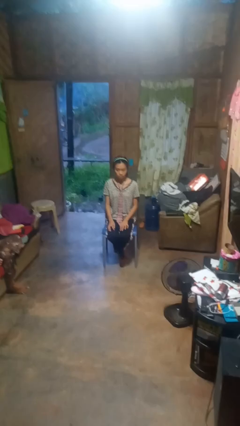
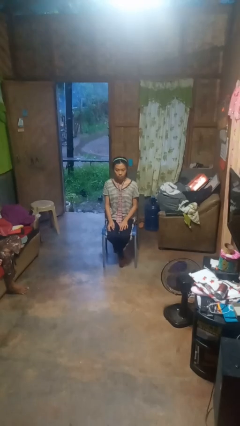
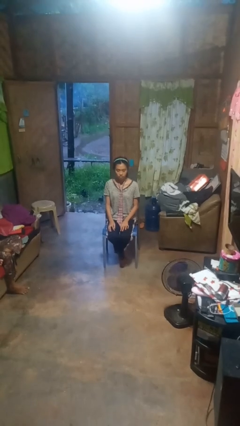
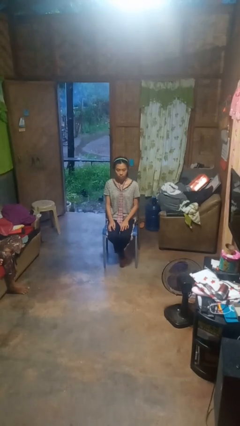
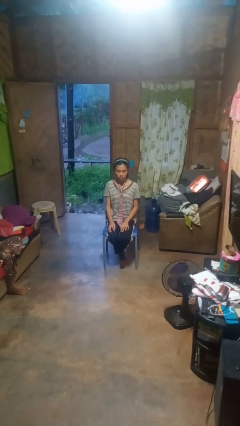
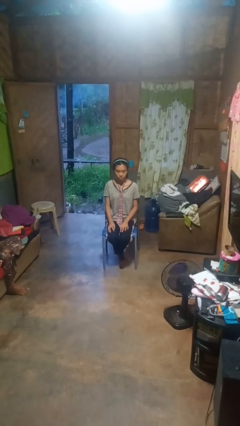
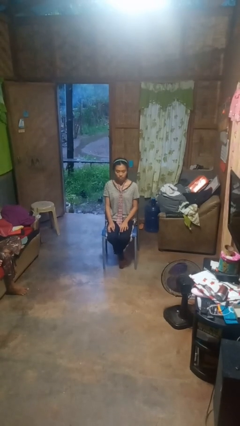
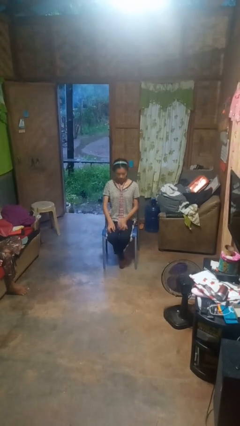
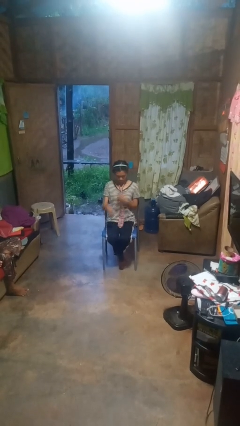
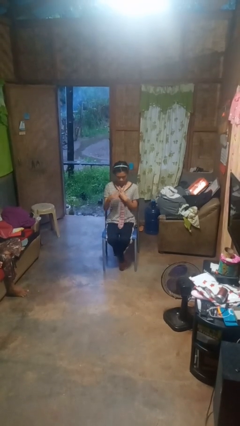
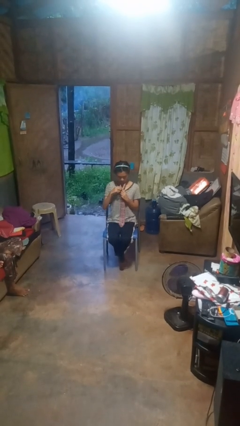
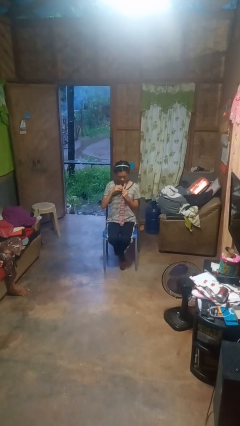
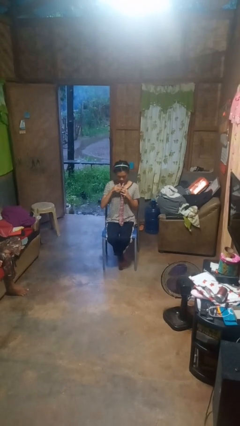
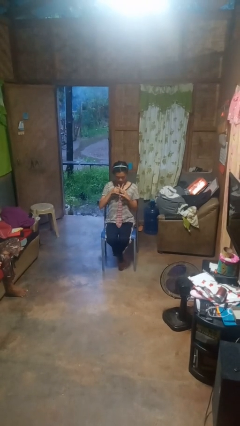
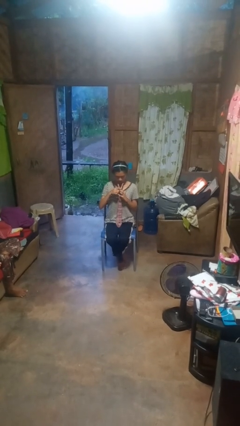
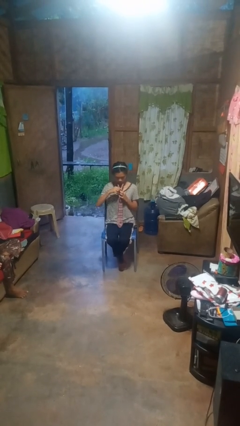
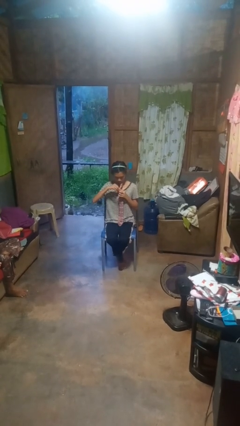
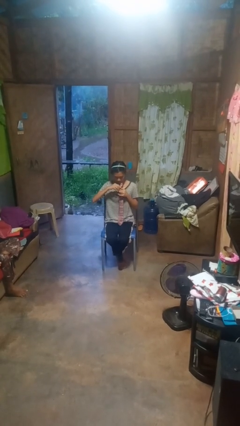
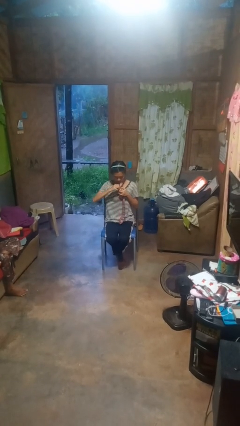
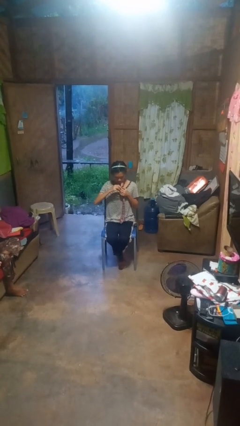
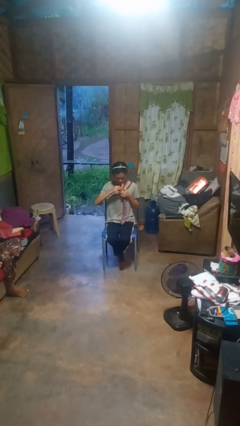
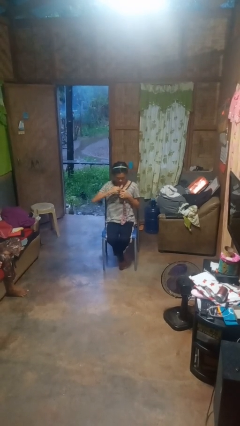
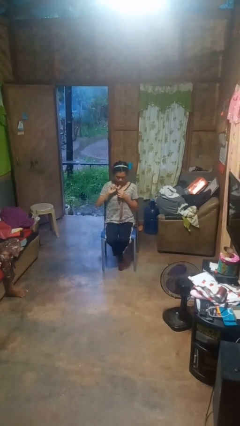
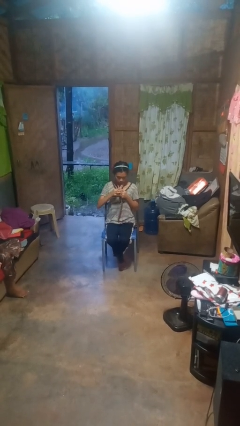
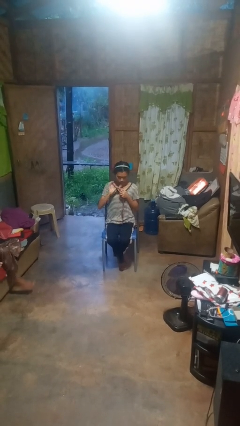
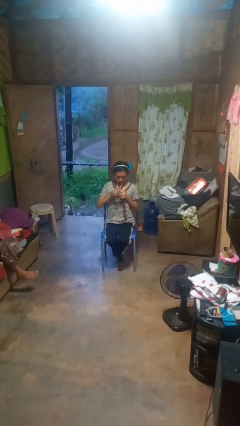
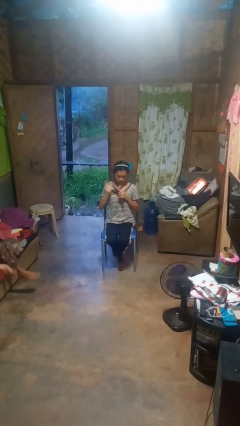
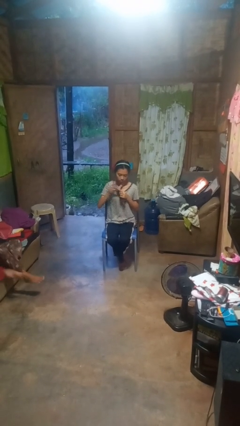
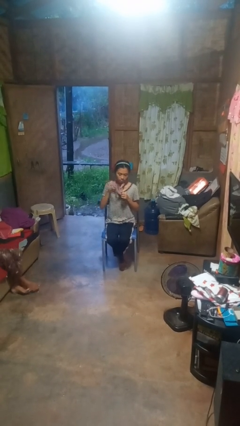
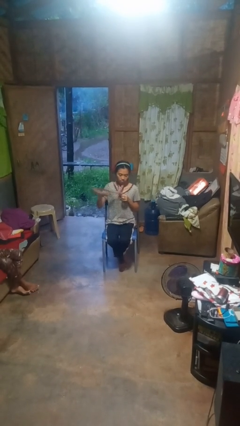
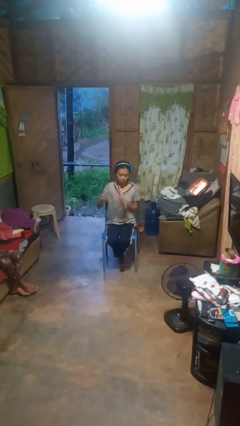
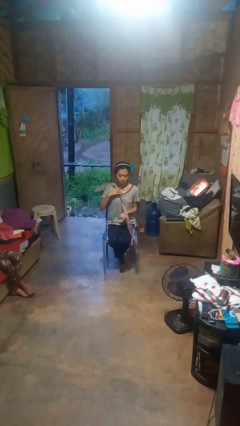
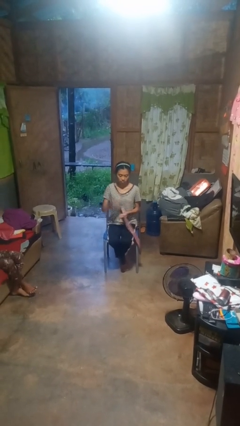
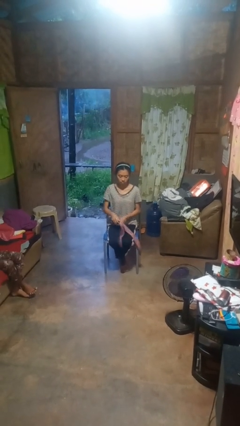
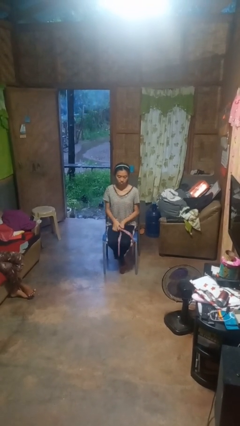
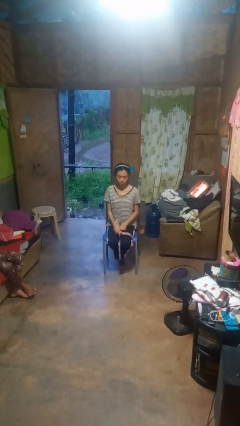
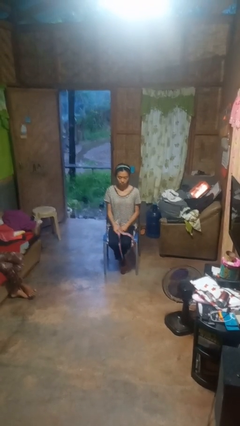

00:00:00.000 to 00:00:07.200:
person takes off necktie

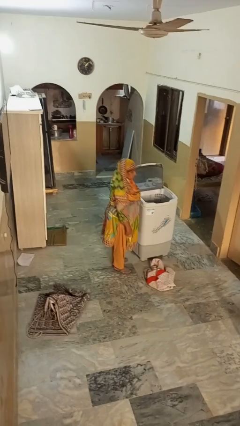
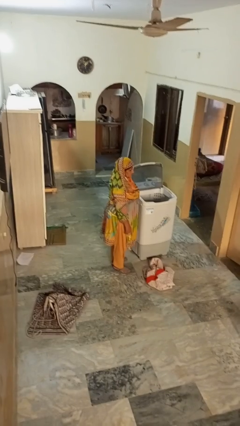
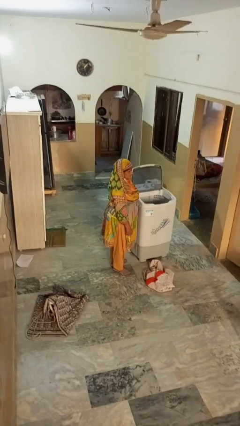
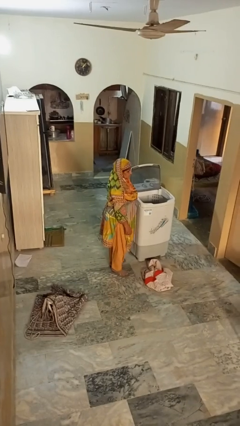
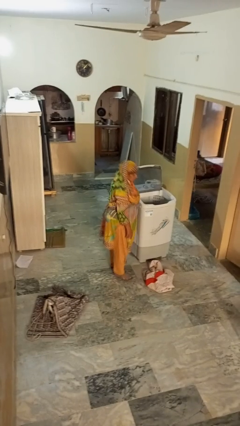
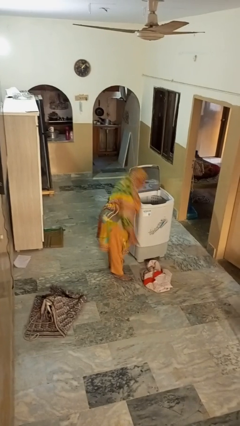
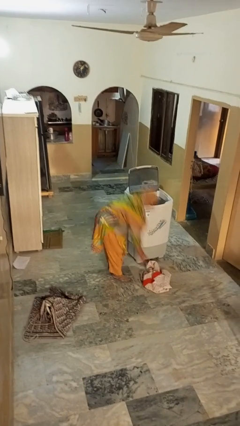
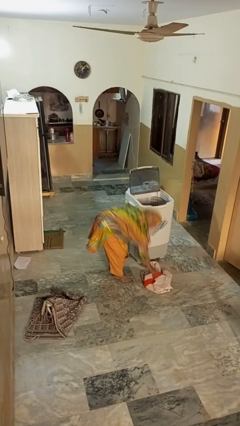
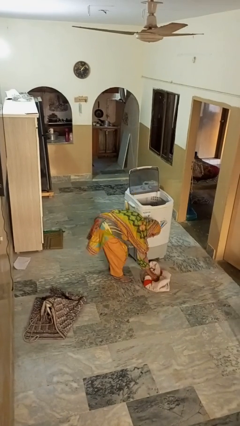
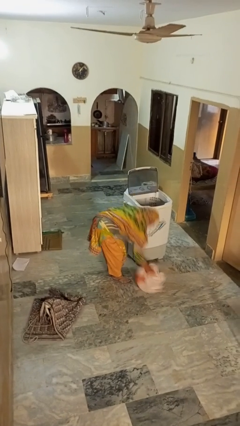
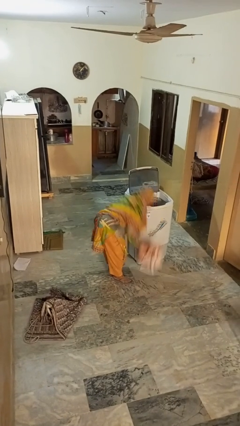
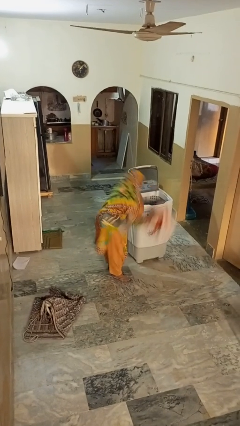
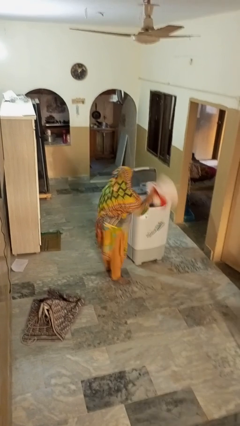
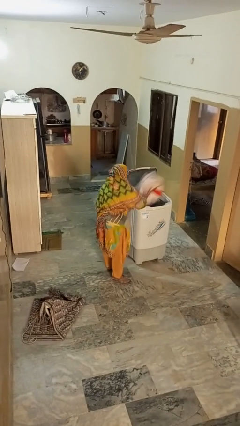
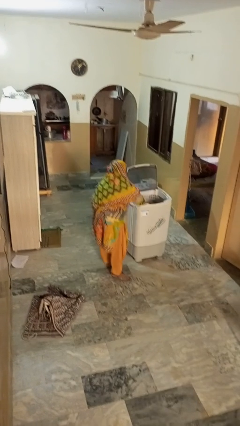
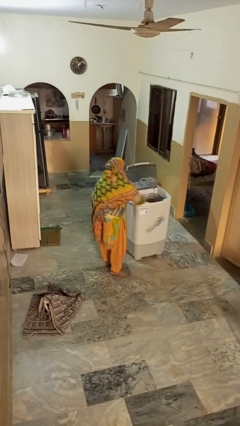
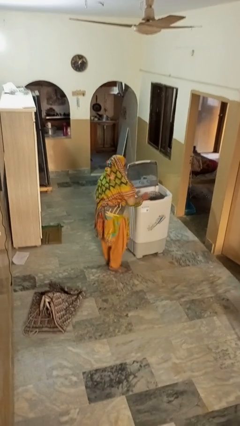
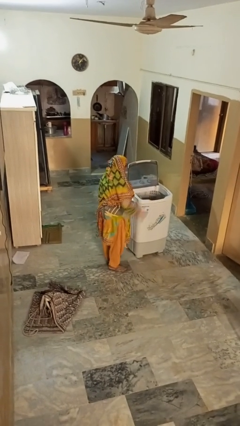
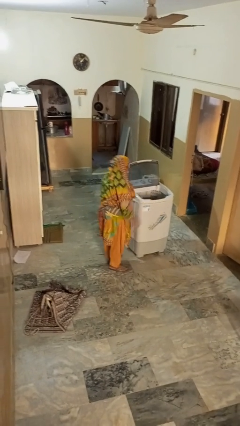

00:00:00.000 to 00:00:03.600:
person loads clotheswasher

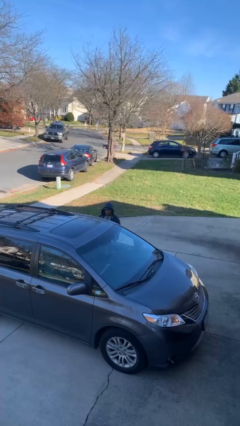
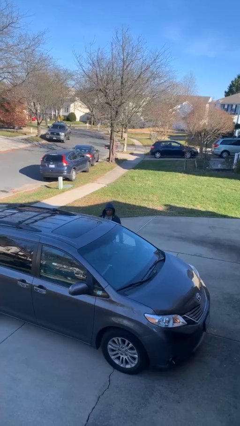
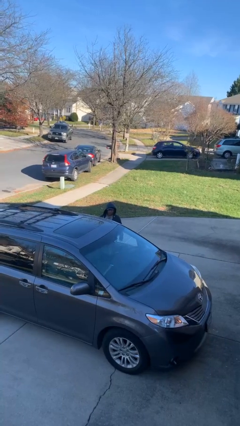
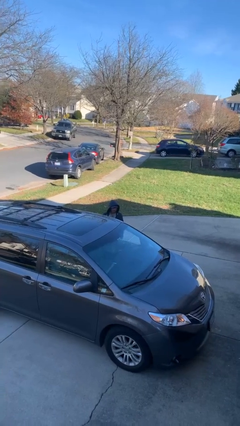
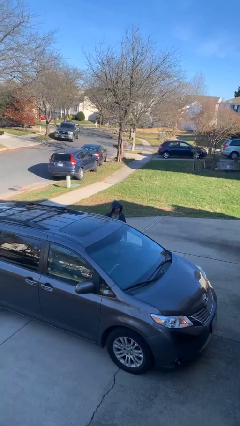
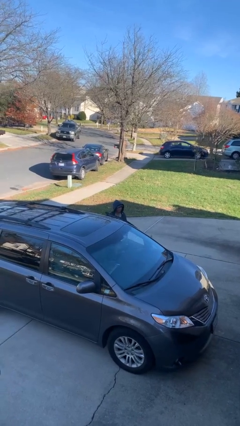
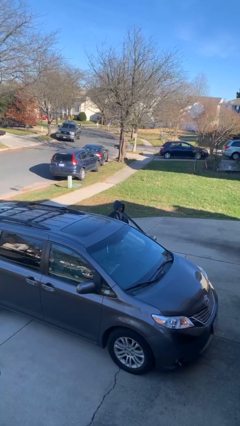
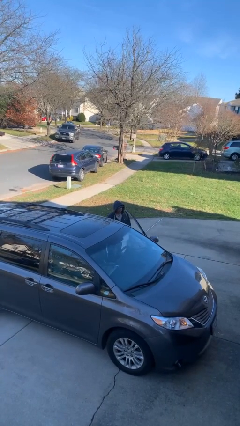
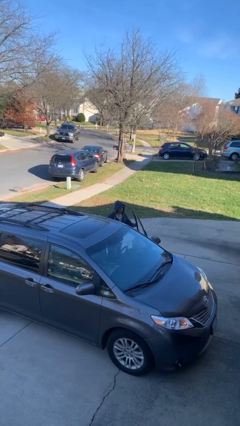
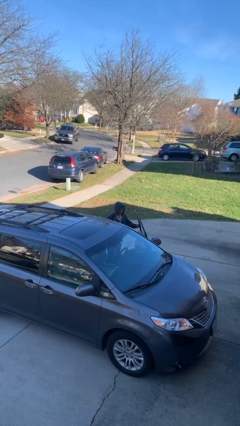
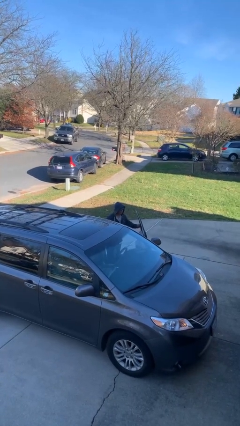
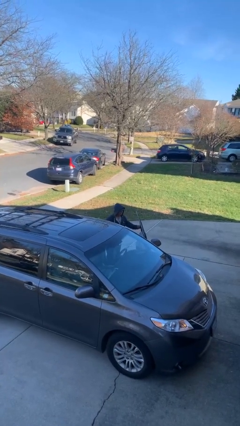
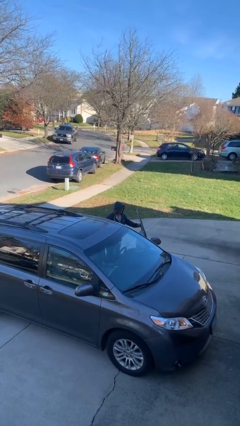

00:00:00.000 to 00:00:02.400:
person opens car door

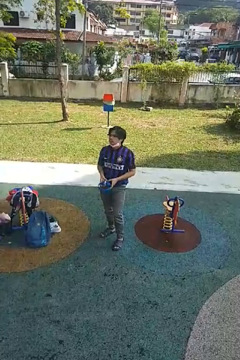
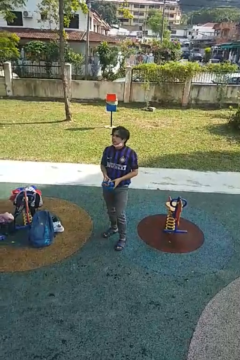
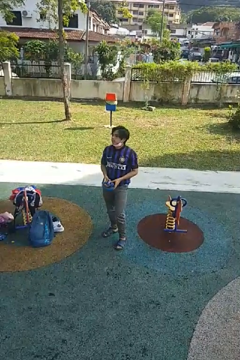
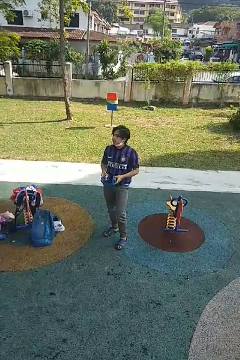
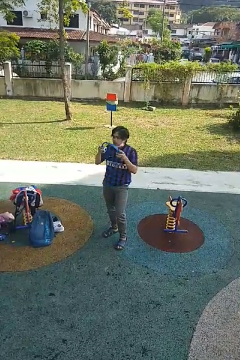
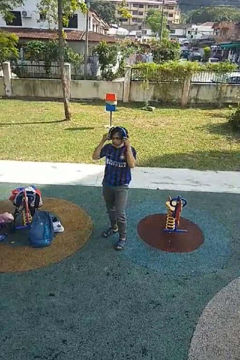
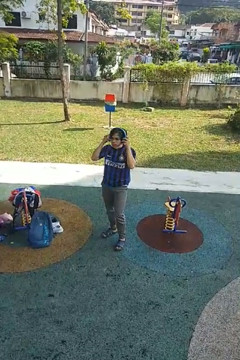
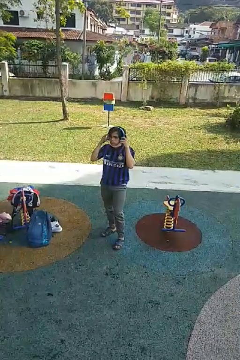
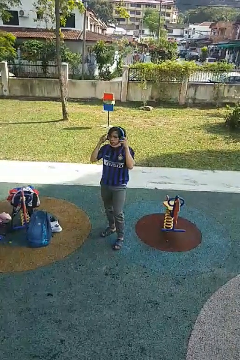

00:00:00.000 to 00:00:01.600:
person puts on headphones

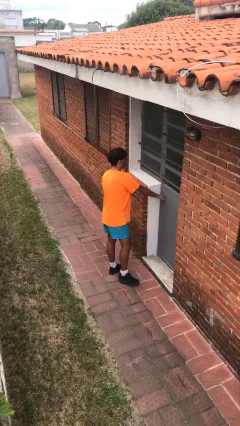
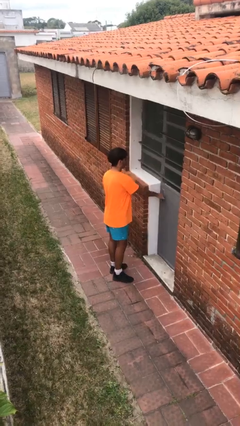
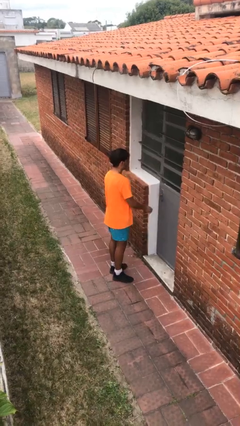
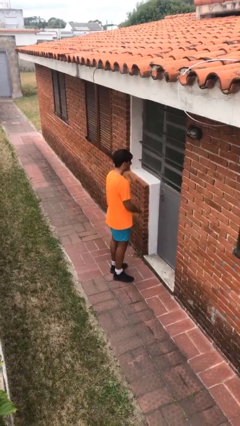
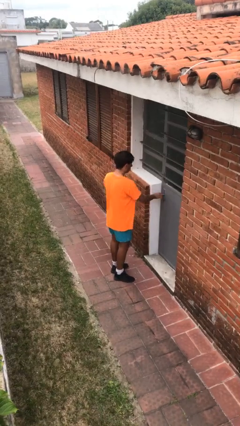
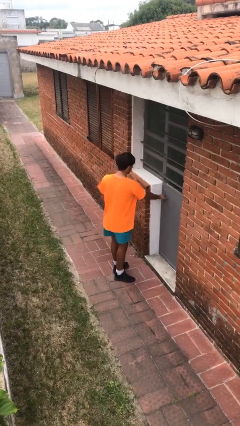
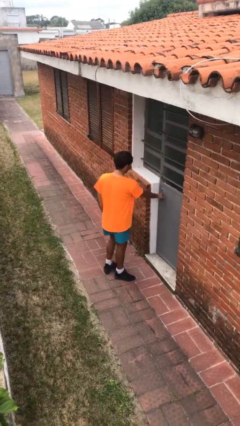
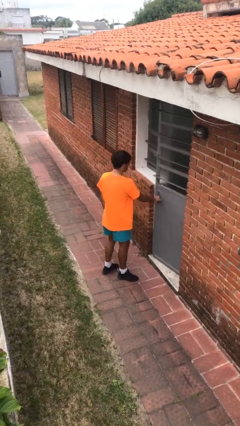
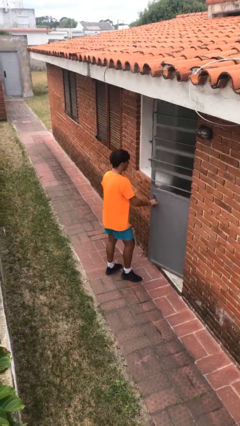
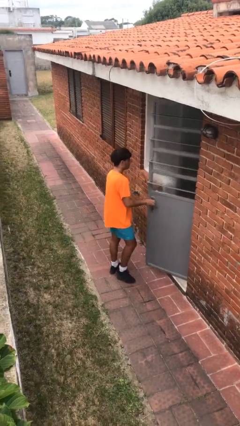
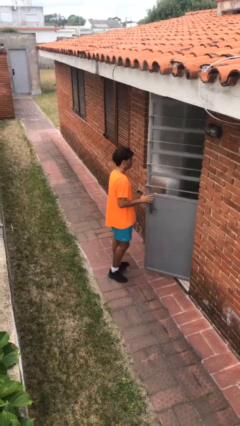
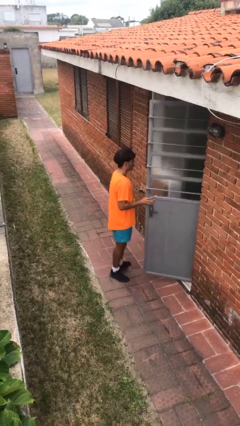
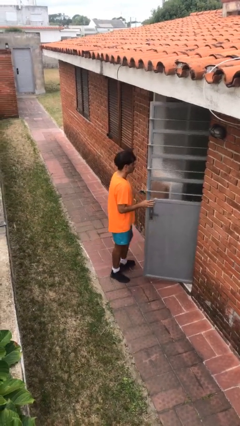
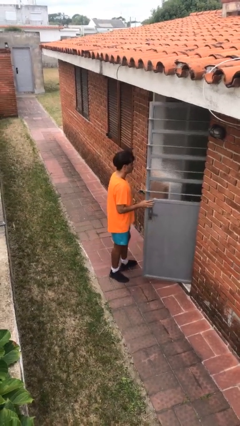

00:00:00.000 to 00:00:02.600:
person opens facility door
